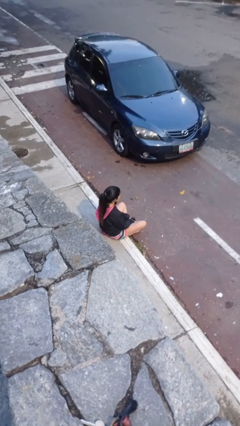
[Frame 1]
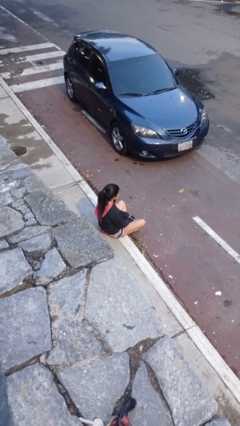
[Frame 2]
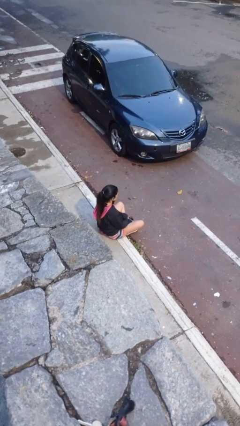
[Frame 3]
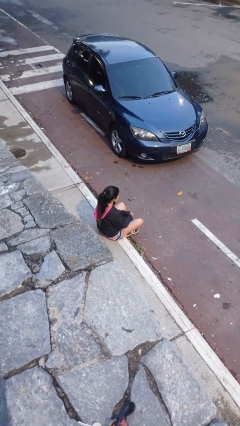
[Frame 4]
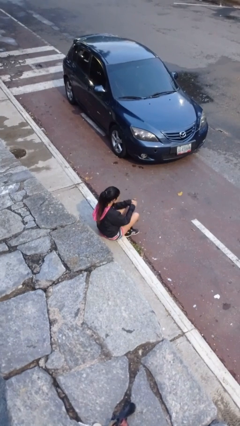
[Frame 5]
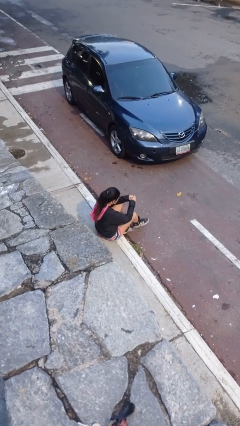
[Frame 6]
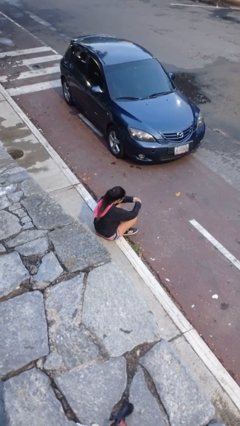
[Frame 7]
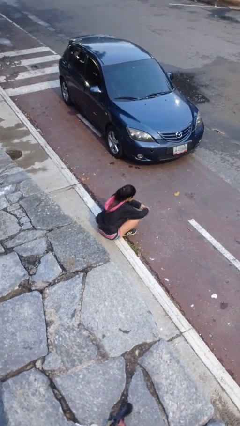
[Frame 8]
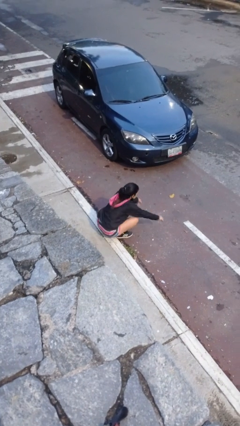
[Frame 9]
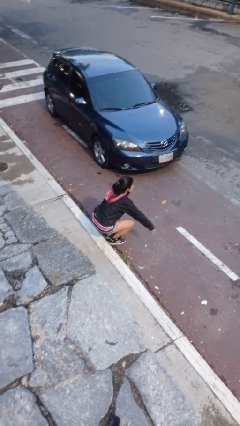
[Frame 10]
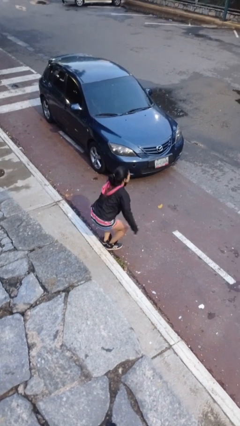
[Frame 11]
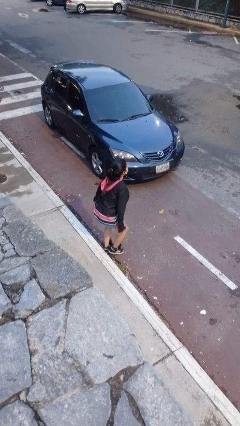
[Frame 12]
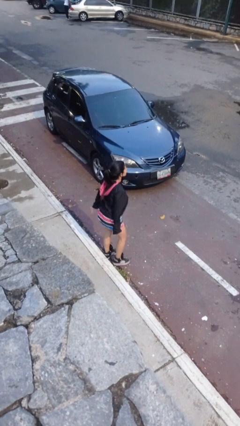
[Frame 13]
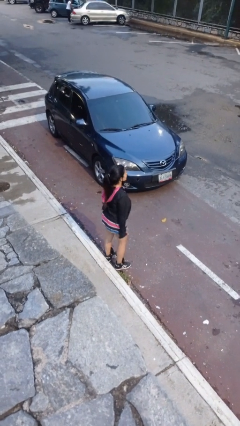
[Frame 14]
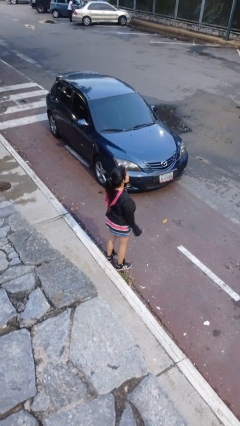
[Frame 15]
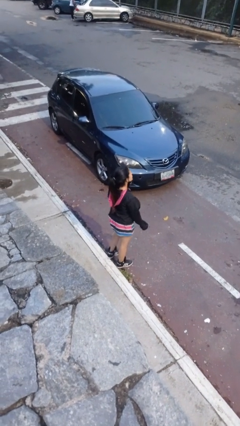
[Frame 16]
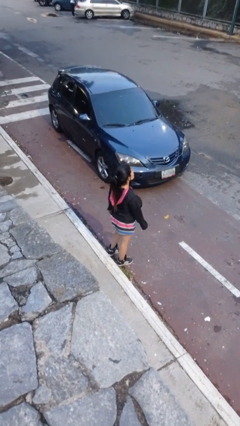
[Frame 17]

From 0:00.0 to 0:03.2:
person stands up from floor

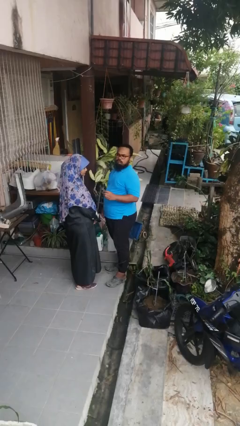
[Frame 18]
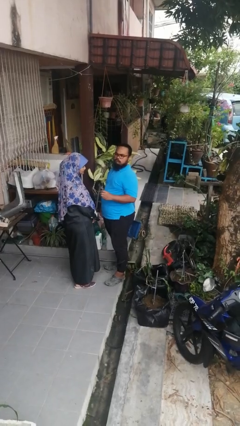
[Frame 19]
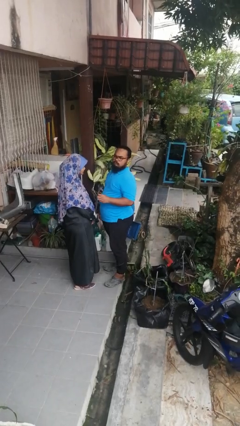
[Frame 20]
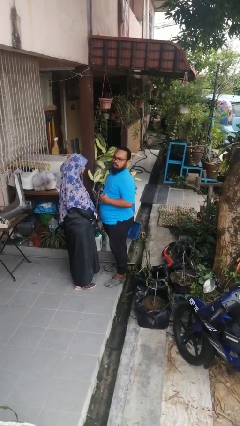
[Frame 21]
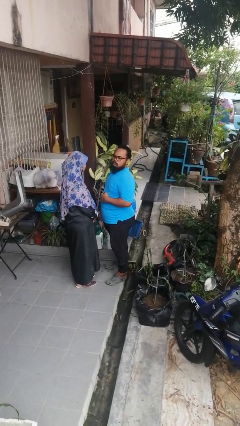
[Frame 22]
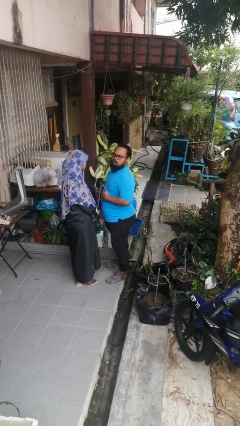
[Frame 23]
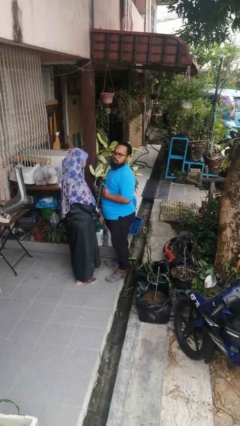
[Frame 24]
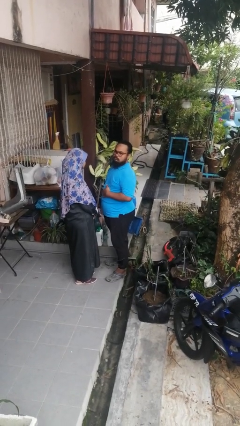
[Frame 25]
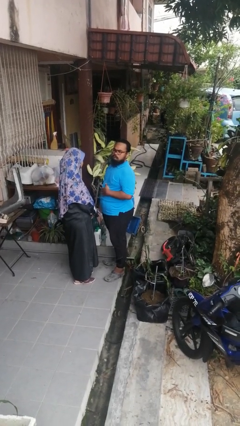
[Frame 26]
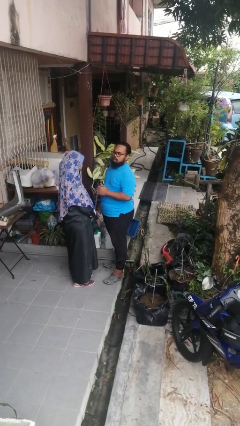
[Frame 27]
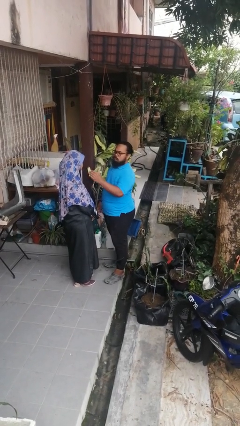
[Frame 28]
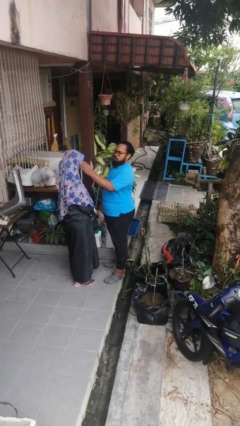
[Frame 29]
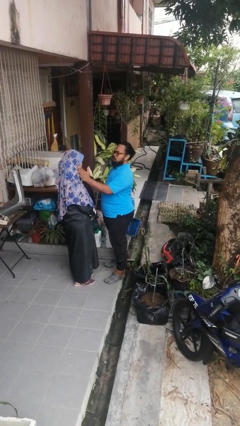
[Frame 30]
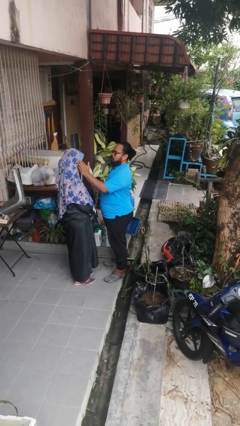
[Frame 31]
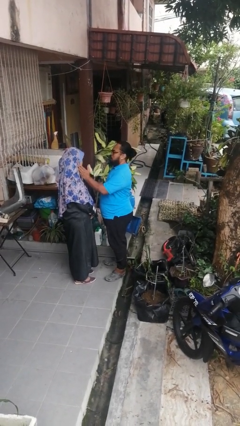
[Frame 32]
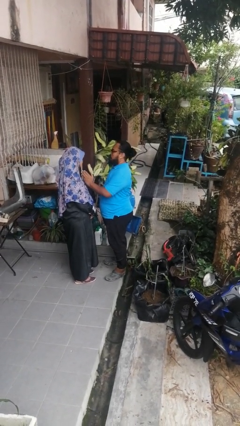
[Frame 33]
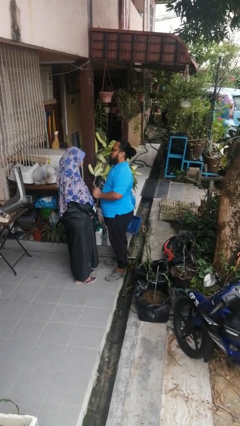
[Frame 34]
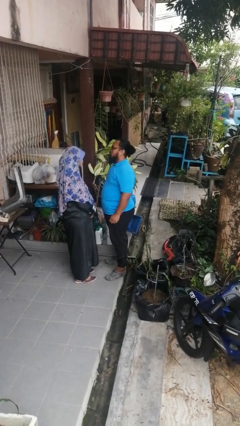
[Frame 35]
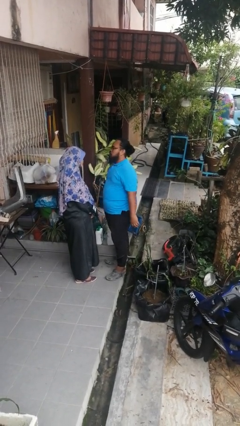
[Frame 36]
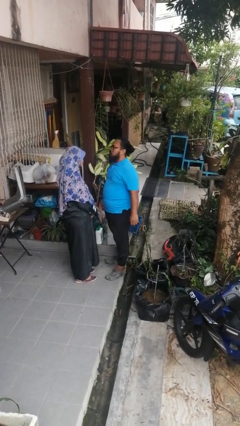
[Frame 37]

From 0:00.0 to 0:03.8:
person touches face of person

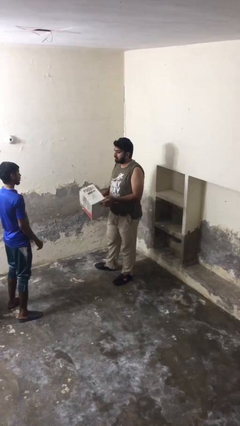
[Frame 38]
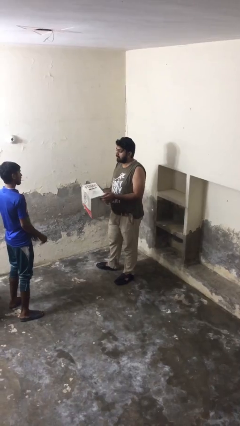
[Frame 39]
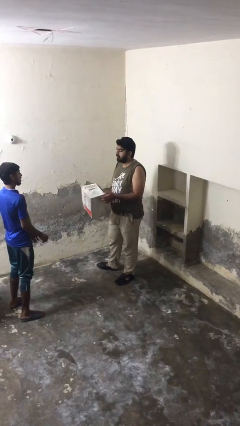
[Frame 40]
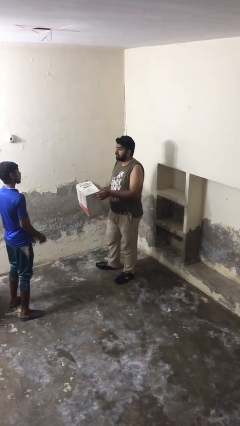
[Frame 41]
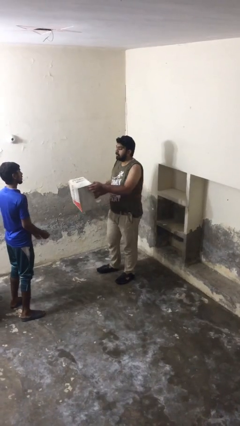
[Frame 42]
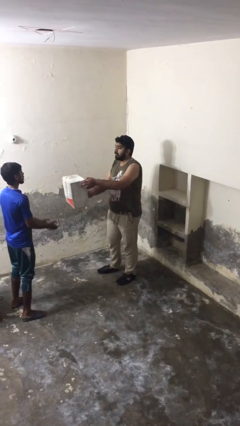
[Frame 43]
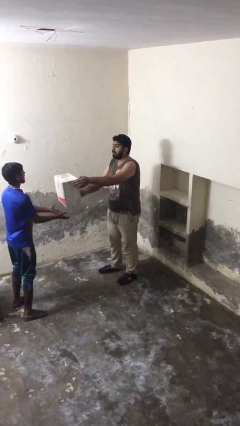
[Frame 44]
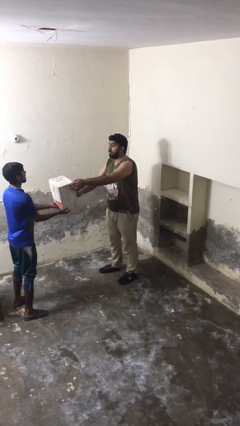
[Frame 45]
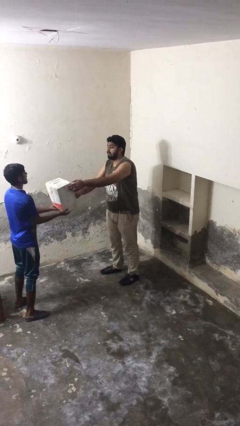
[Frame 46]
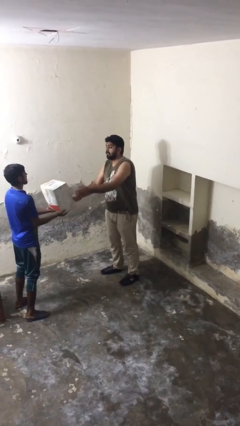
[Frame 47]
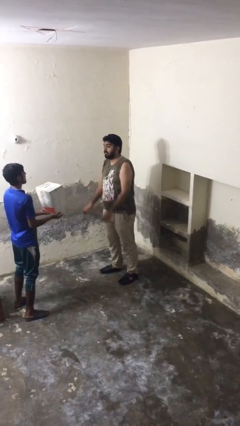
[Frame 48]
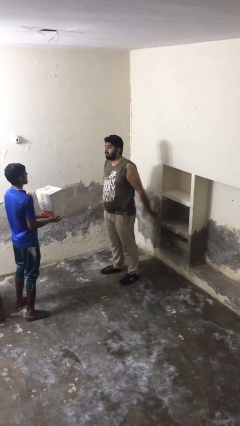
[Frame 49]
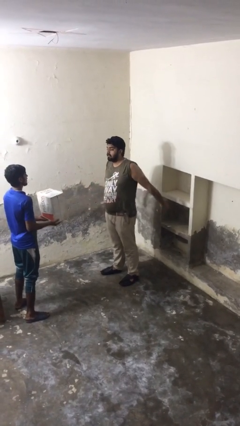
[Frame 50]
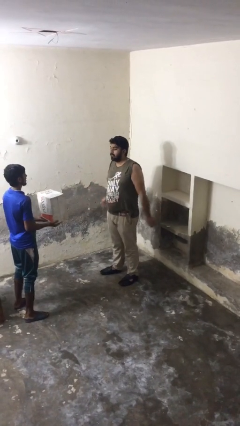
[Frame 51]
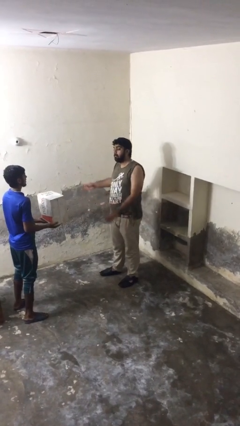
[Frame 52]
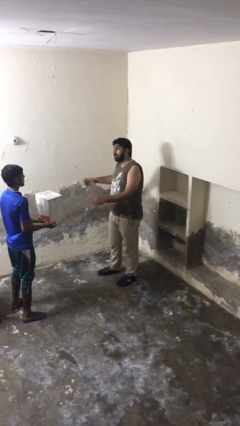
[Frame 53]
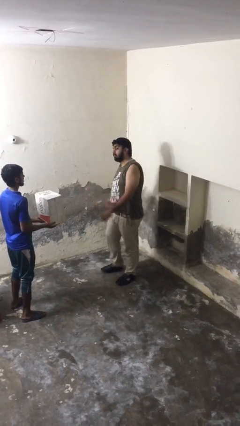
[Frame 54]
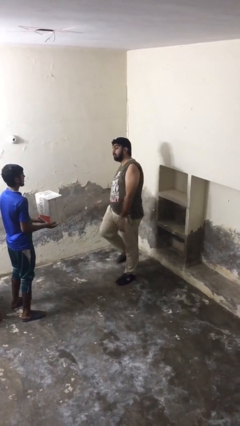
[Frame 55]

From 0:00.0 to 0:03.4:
person transfers object to person

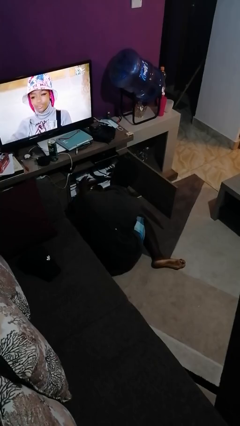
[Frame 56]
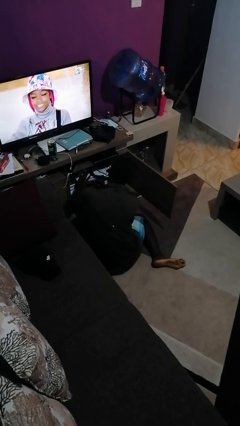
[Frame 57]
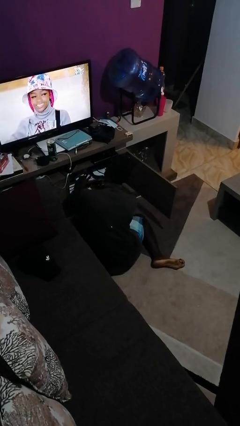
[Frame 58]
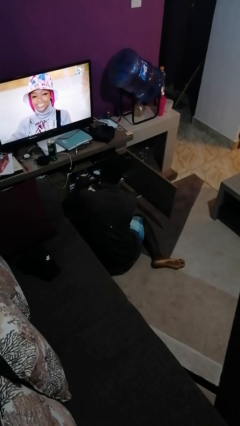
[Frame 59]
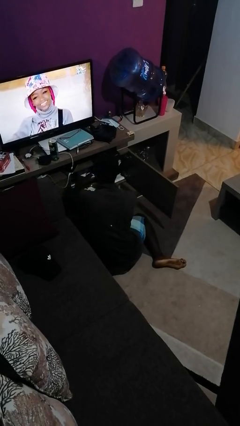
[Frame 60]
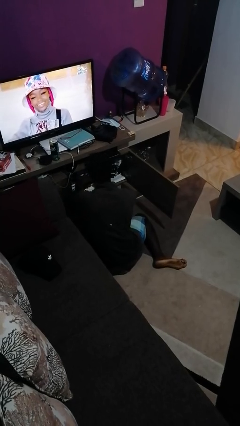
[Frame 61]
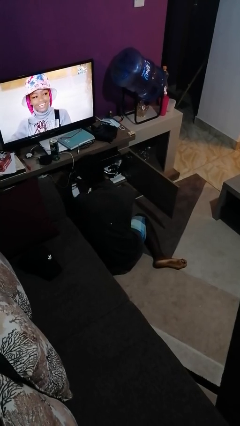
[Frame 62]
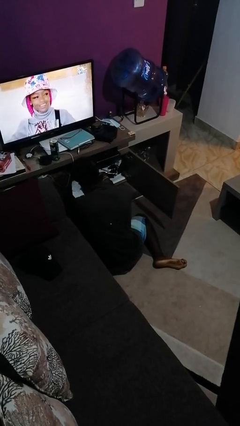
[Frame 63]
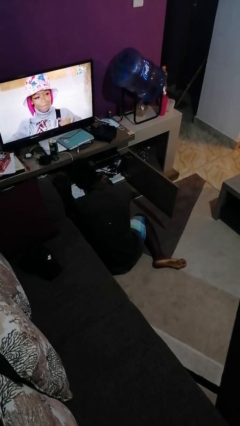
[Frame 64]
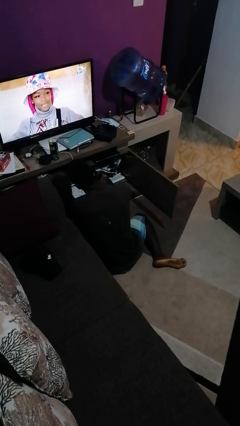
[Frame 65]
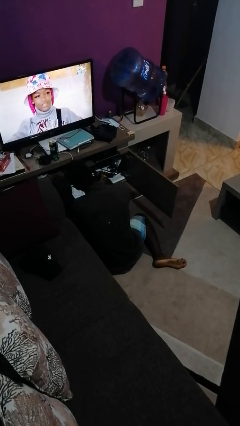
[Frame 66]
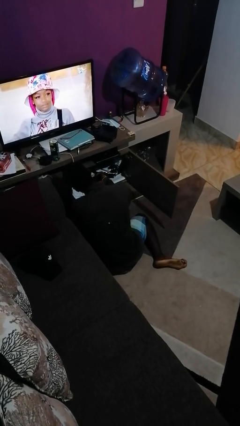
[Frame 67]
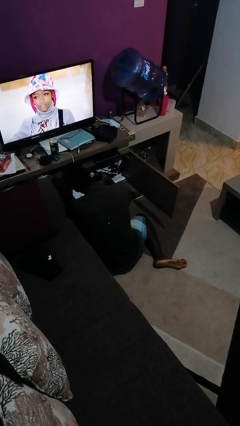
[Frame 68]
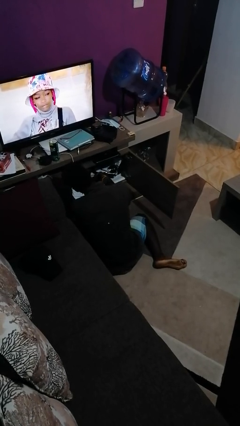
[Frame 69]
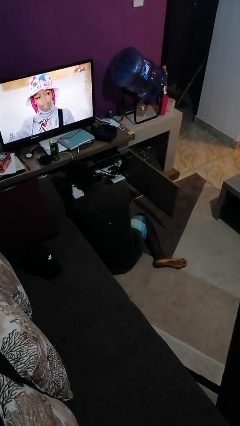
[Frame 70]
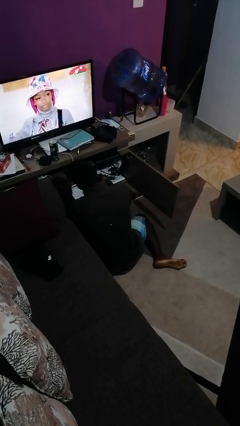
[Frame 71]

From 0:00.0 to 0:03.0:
person searches in cabinet

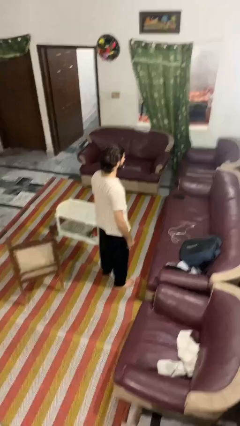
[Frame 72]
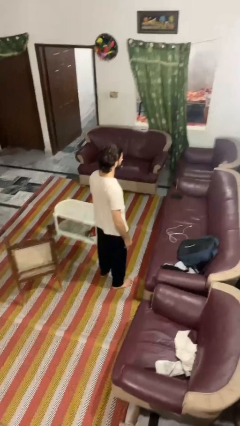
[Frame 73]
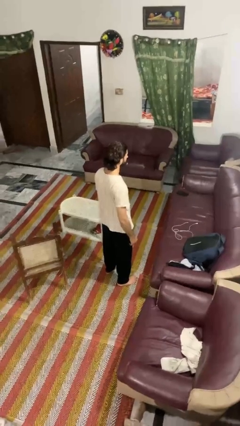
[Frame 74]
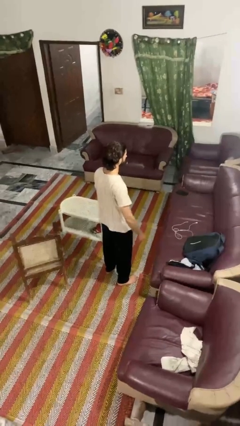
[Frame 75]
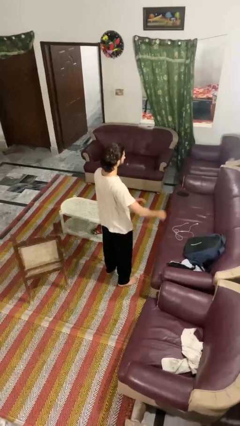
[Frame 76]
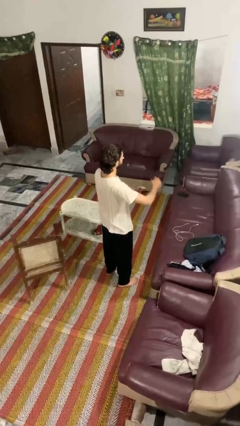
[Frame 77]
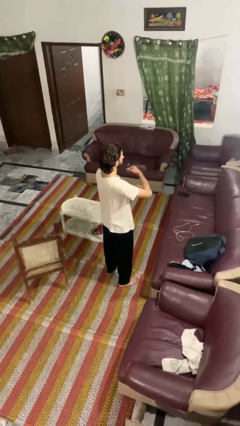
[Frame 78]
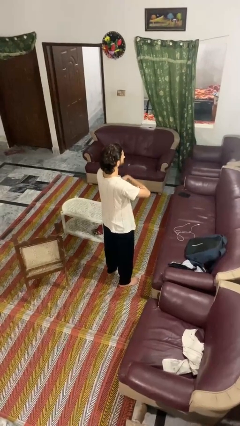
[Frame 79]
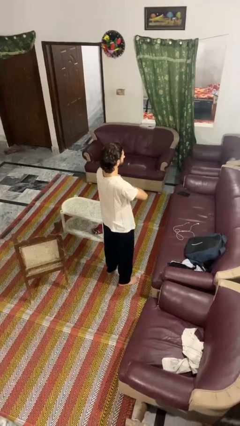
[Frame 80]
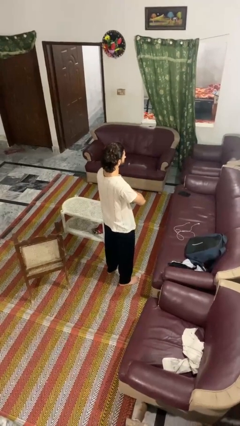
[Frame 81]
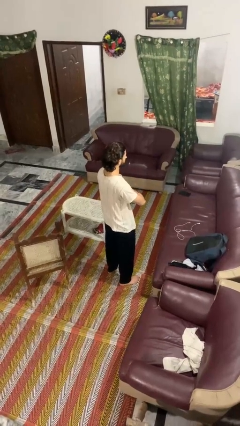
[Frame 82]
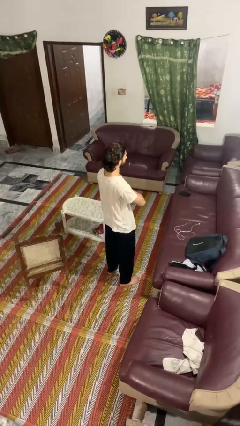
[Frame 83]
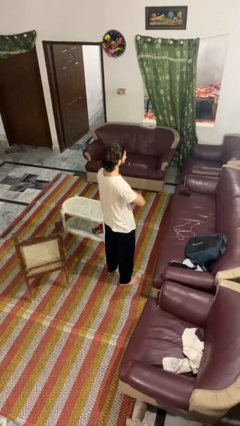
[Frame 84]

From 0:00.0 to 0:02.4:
person crosses arms

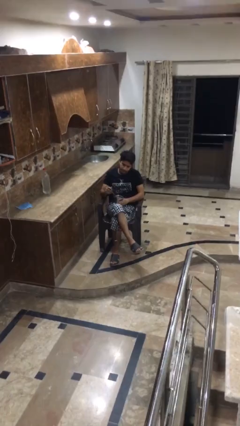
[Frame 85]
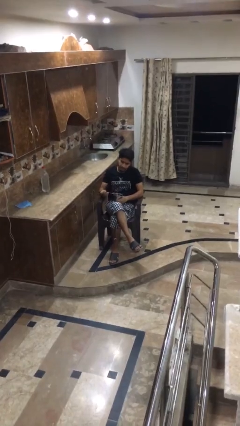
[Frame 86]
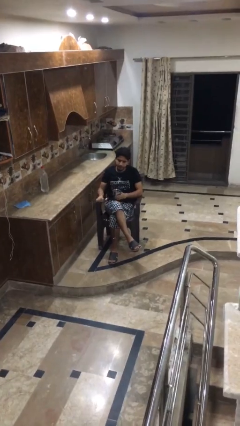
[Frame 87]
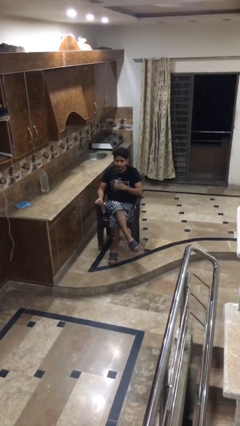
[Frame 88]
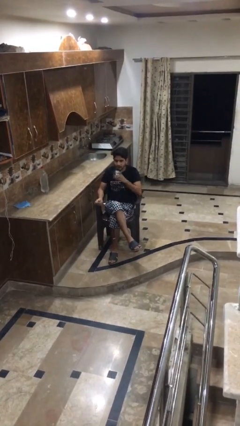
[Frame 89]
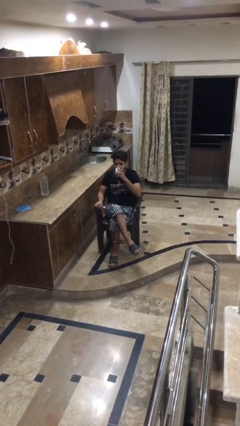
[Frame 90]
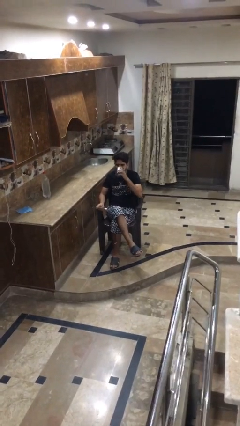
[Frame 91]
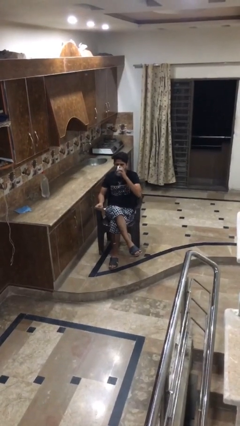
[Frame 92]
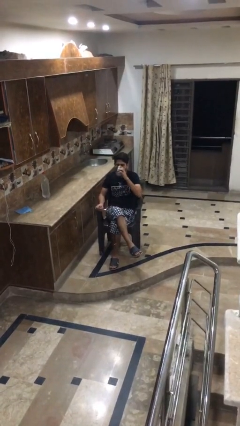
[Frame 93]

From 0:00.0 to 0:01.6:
person drinks from mug

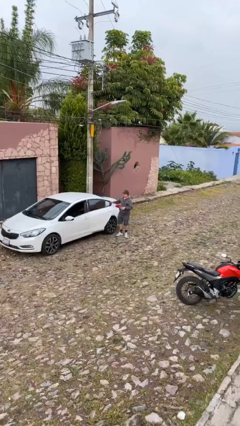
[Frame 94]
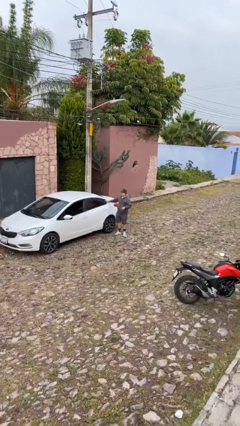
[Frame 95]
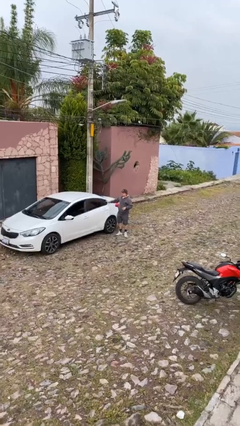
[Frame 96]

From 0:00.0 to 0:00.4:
person closes car door
